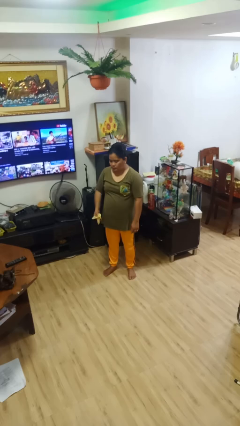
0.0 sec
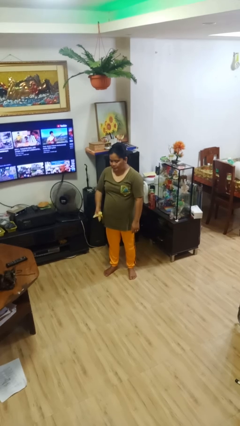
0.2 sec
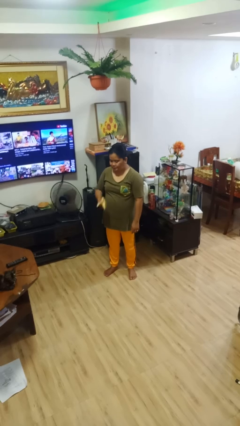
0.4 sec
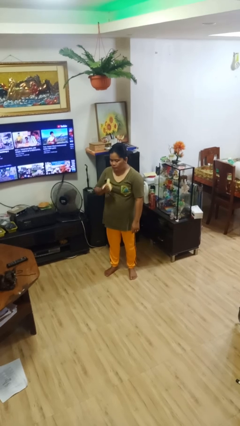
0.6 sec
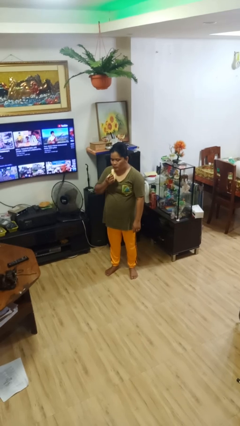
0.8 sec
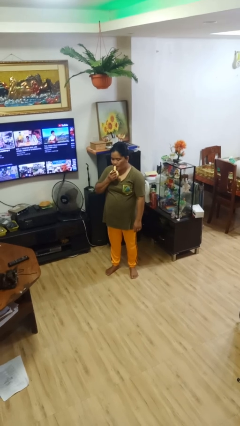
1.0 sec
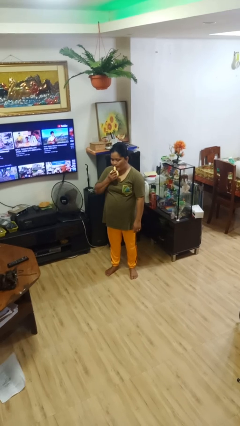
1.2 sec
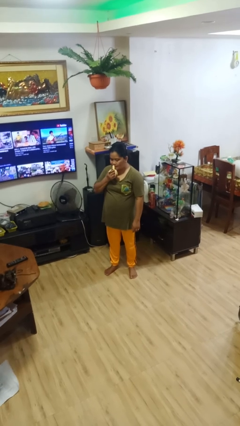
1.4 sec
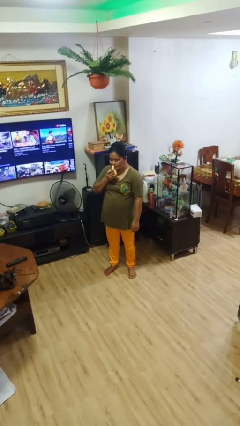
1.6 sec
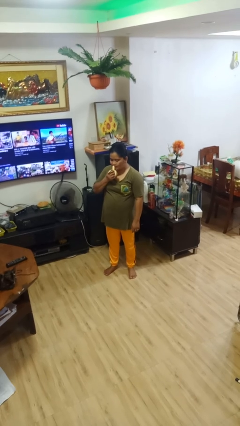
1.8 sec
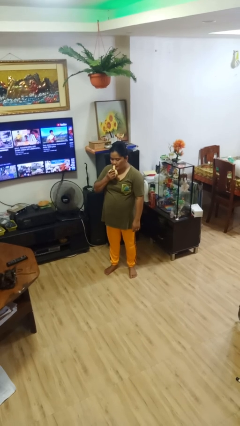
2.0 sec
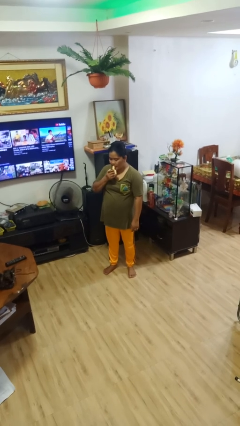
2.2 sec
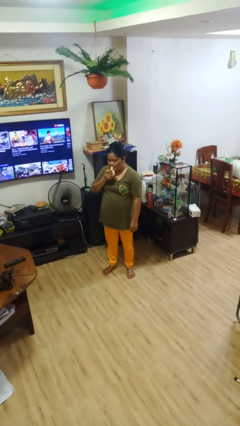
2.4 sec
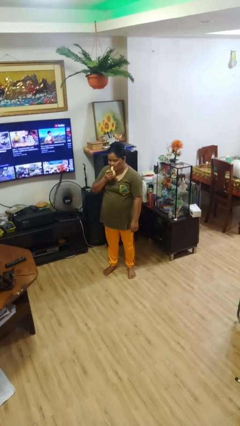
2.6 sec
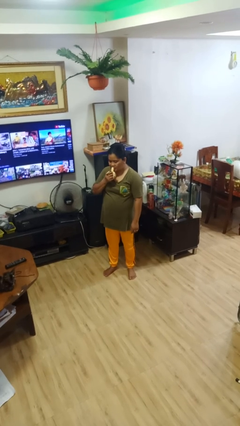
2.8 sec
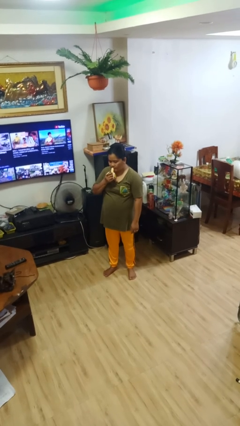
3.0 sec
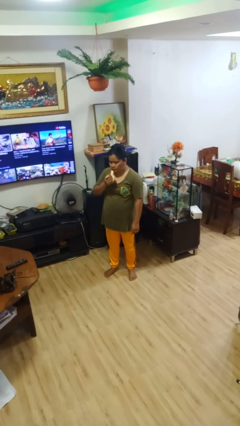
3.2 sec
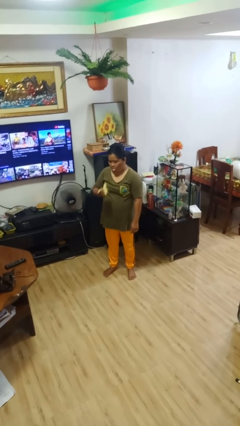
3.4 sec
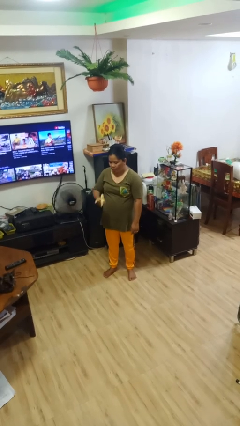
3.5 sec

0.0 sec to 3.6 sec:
person eats banana

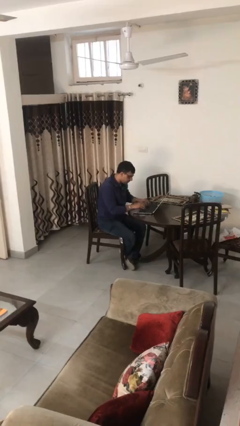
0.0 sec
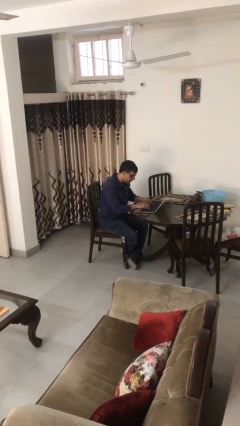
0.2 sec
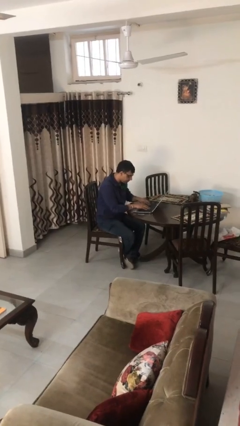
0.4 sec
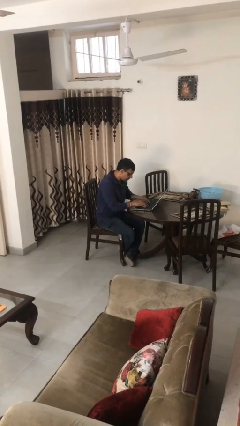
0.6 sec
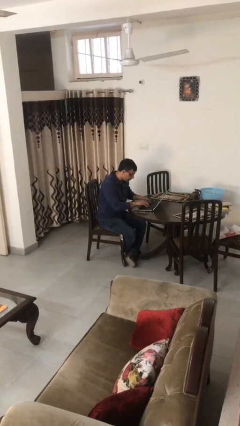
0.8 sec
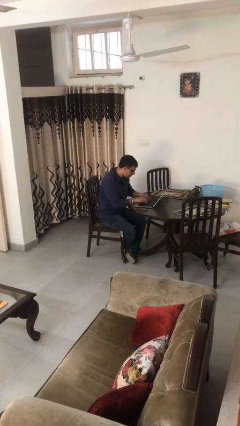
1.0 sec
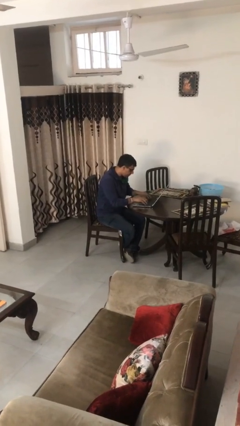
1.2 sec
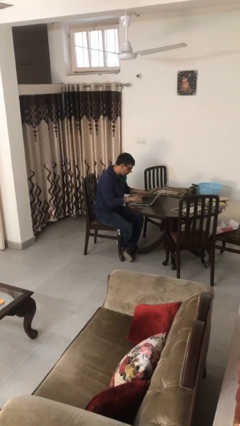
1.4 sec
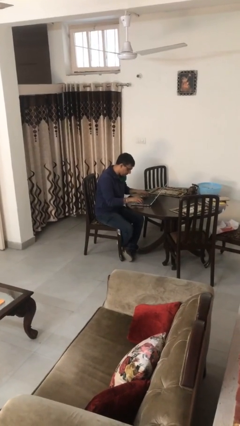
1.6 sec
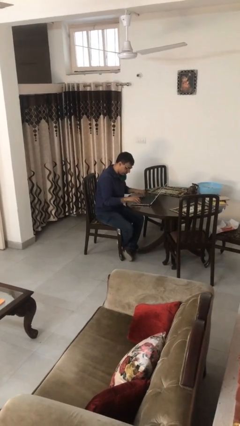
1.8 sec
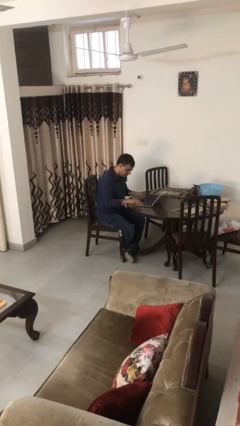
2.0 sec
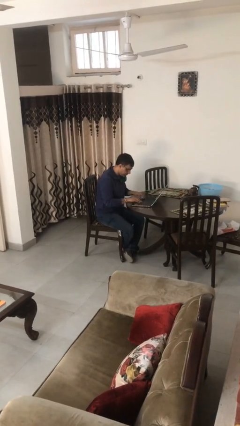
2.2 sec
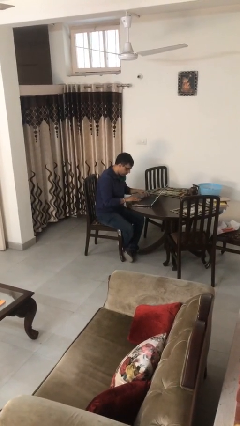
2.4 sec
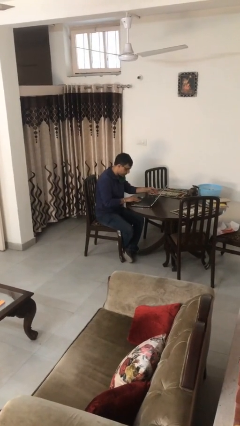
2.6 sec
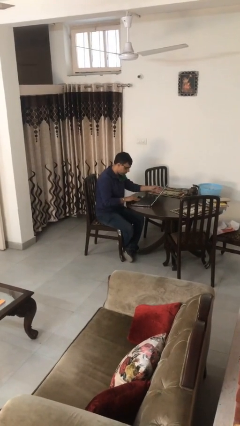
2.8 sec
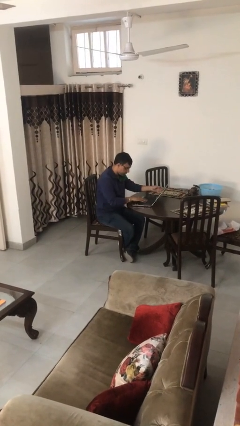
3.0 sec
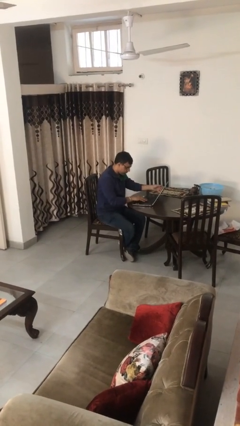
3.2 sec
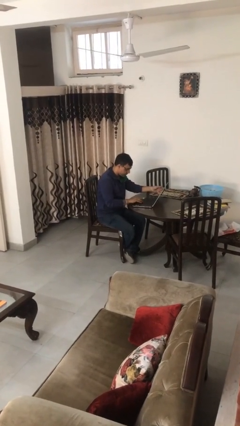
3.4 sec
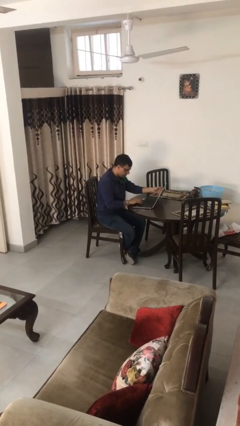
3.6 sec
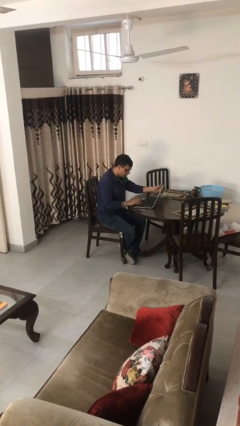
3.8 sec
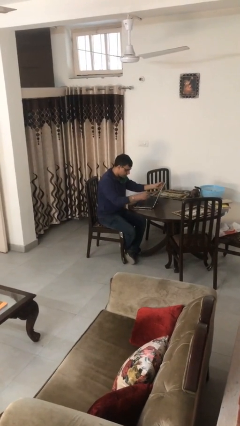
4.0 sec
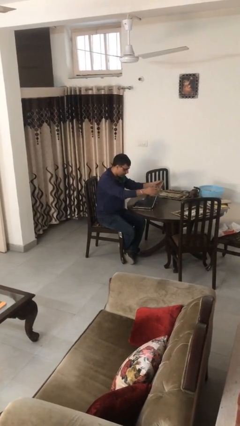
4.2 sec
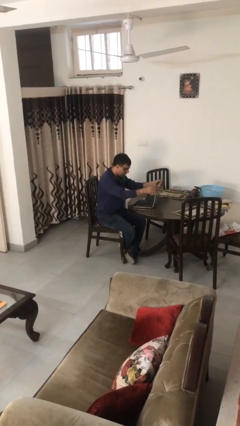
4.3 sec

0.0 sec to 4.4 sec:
person interacts with laptop

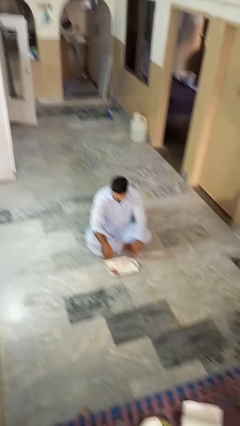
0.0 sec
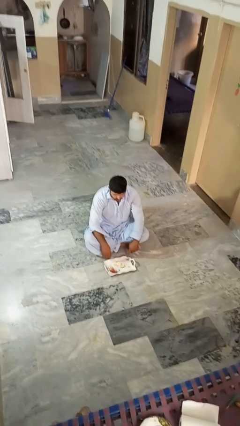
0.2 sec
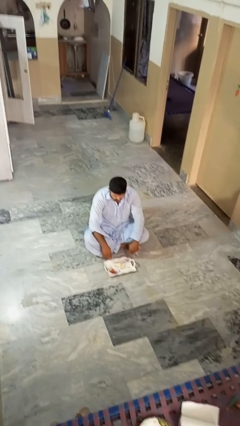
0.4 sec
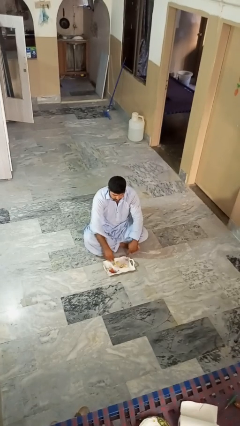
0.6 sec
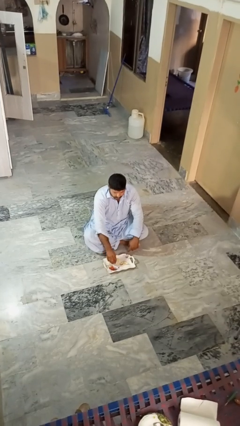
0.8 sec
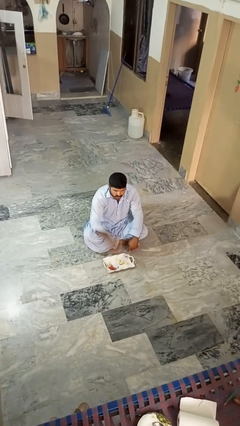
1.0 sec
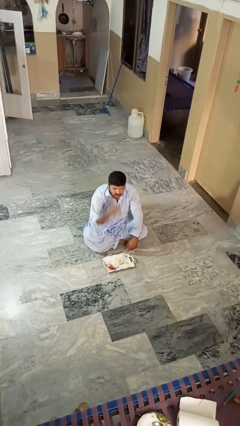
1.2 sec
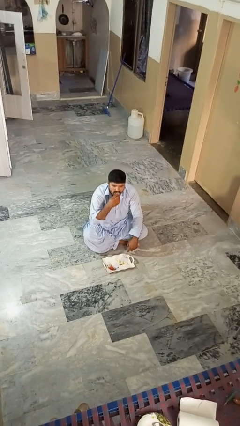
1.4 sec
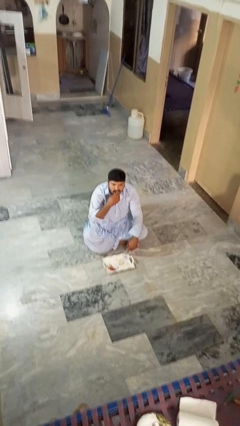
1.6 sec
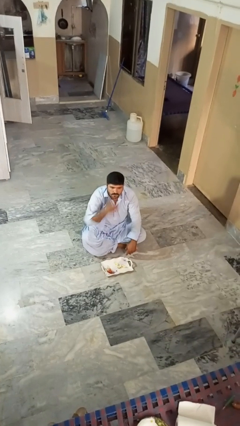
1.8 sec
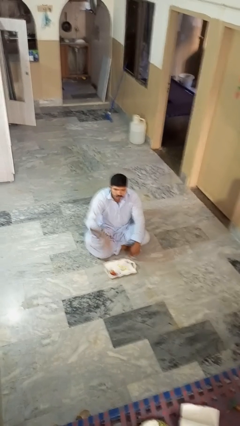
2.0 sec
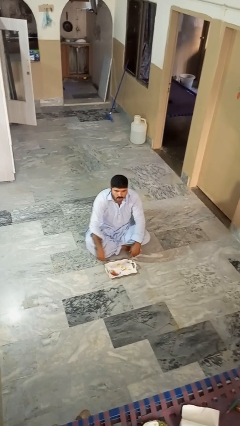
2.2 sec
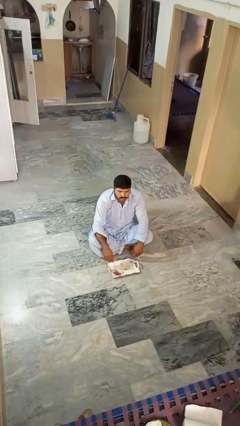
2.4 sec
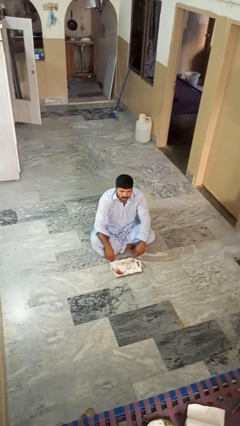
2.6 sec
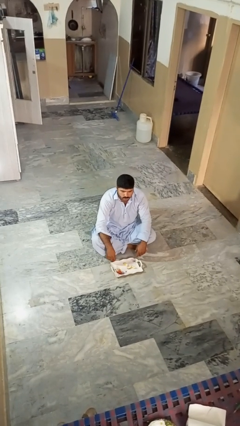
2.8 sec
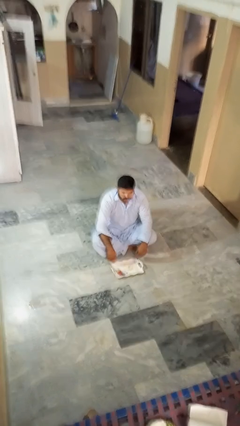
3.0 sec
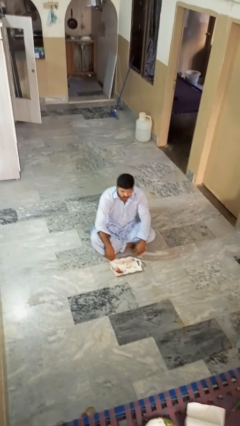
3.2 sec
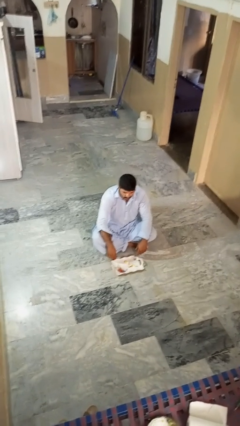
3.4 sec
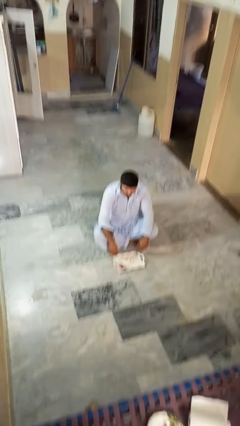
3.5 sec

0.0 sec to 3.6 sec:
person eats apple

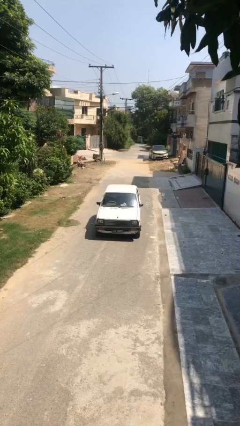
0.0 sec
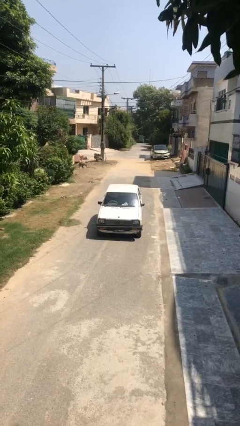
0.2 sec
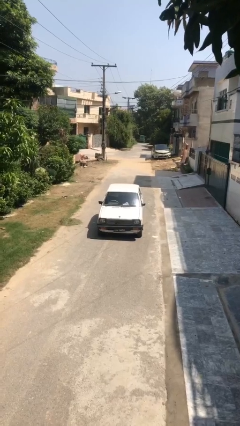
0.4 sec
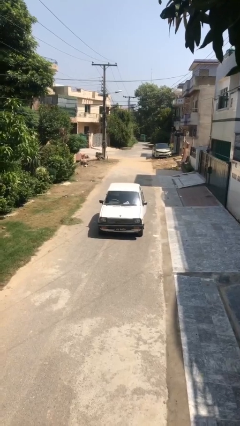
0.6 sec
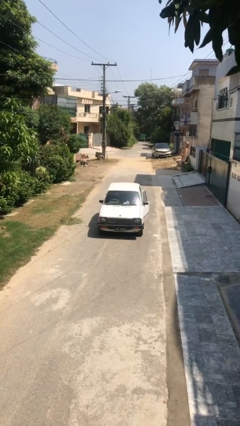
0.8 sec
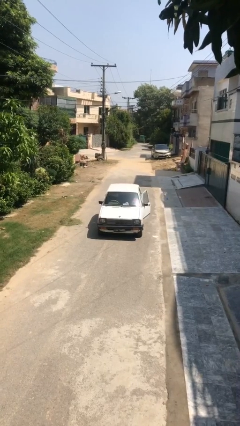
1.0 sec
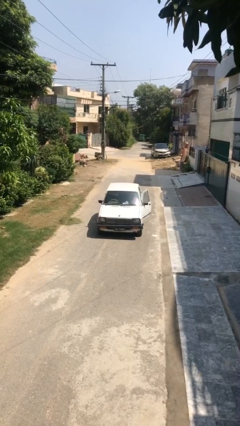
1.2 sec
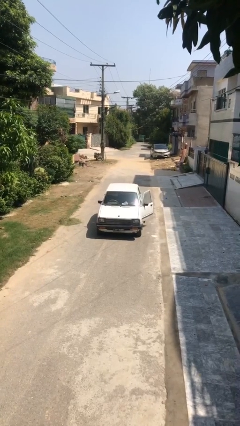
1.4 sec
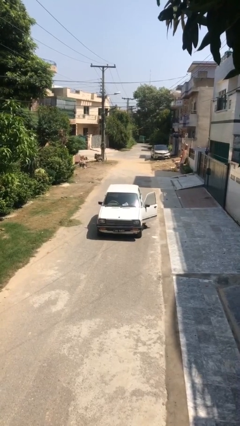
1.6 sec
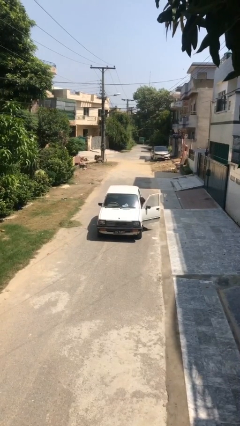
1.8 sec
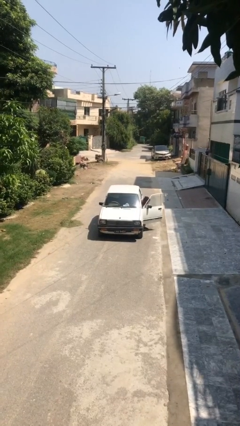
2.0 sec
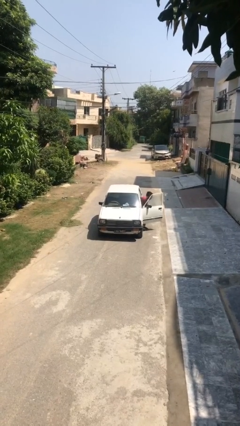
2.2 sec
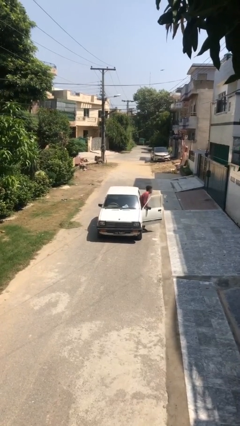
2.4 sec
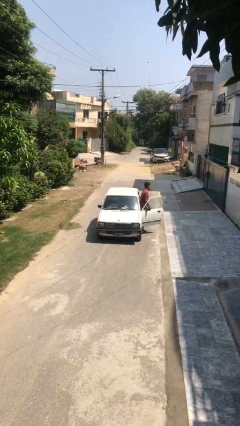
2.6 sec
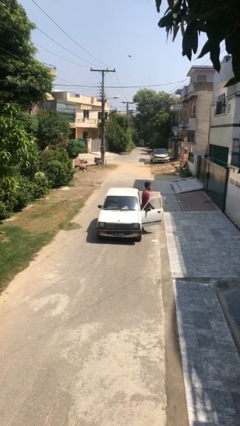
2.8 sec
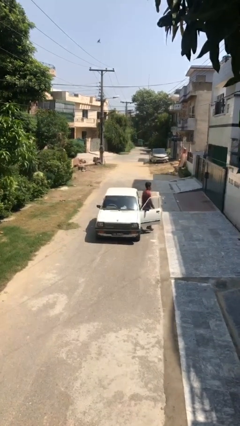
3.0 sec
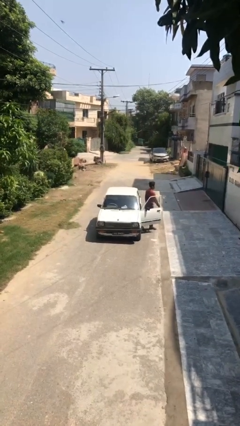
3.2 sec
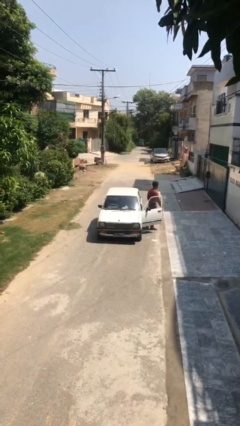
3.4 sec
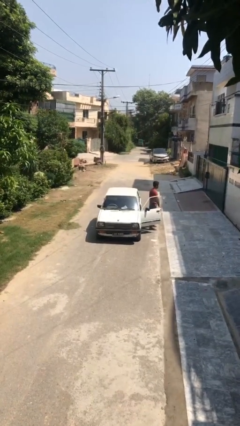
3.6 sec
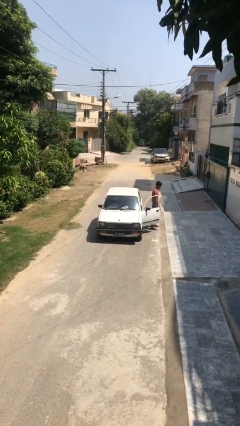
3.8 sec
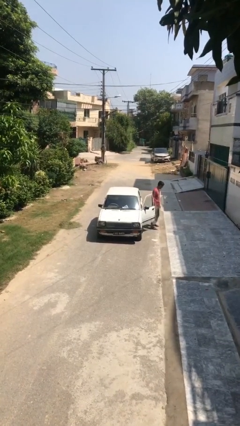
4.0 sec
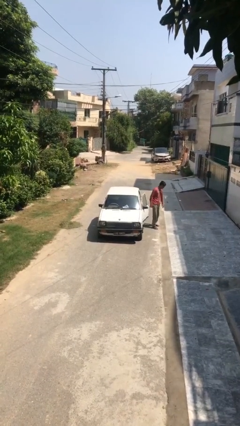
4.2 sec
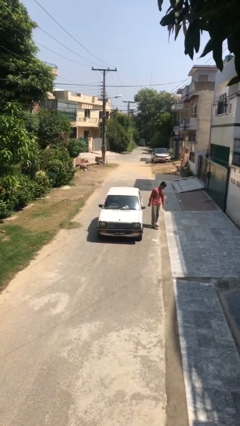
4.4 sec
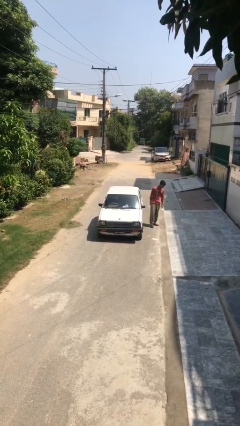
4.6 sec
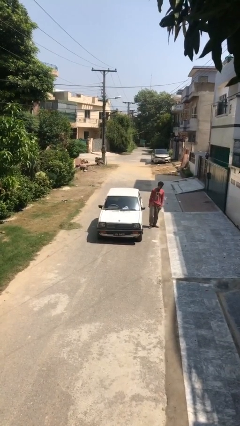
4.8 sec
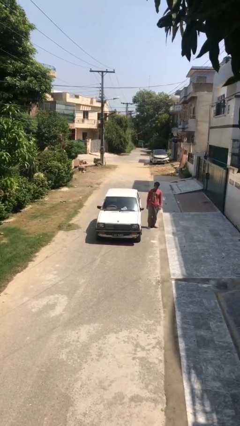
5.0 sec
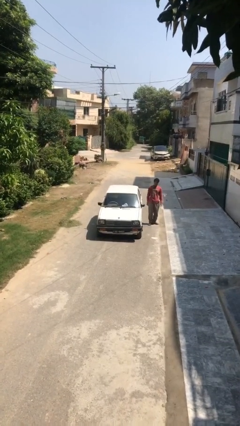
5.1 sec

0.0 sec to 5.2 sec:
car drops off person

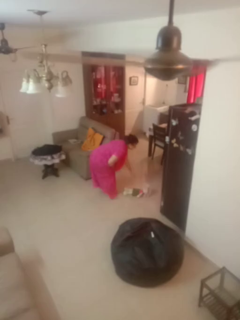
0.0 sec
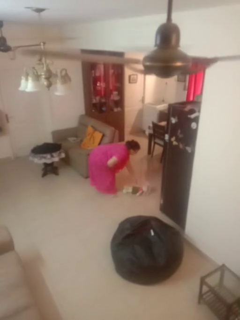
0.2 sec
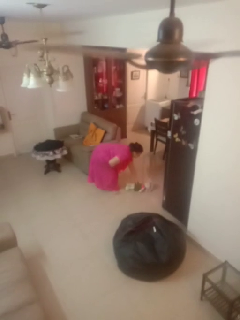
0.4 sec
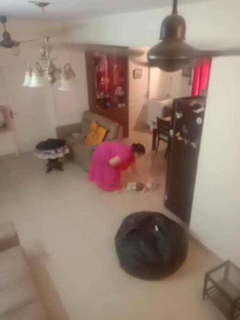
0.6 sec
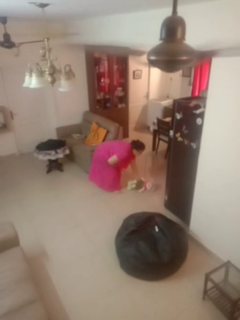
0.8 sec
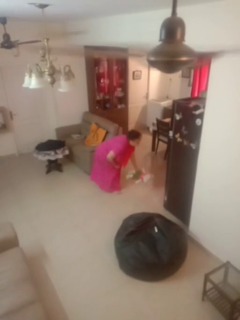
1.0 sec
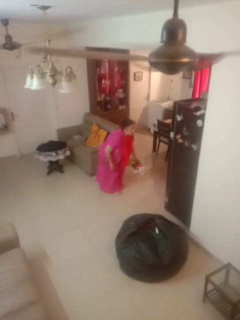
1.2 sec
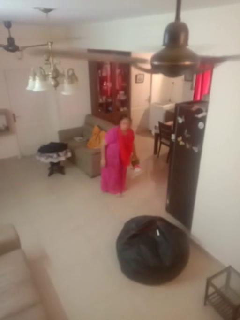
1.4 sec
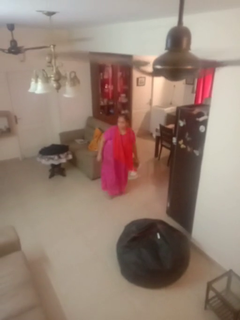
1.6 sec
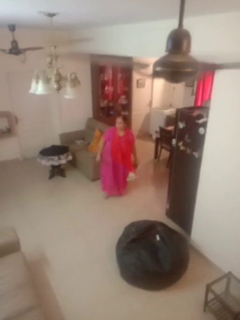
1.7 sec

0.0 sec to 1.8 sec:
person picks up object from floor
